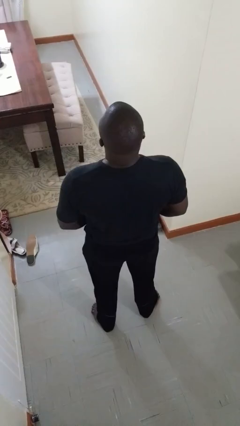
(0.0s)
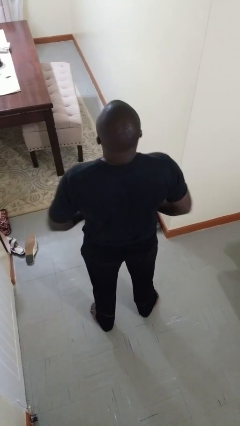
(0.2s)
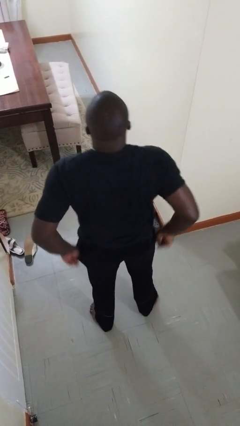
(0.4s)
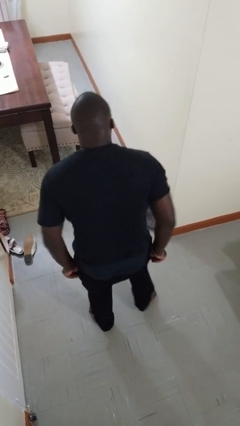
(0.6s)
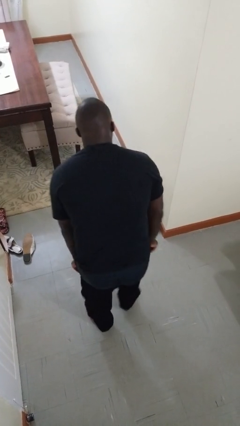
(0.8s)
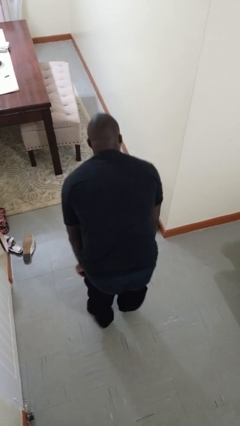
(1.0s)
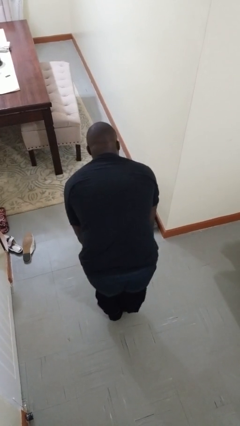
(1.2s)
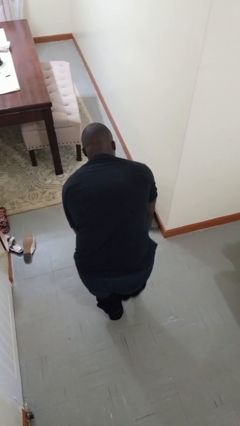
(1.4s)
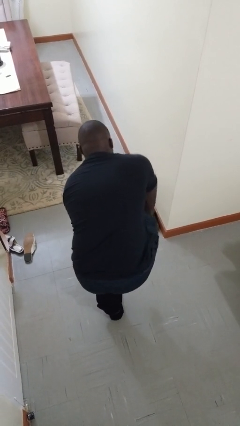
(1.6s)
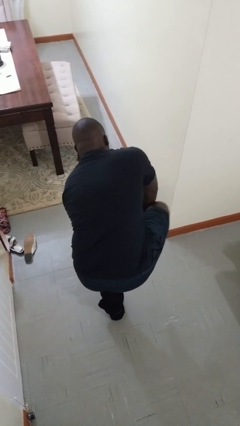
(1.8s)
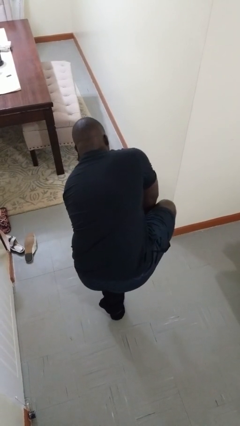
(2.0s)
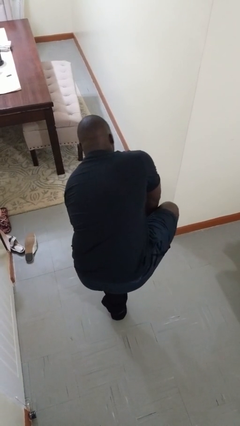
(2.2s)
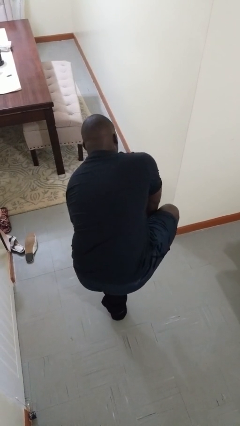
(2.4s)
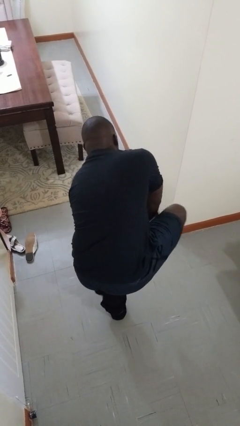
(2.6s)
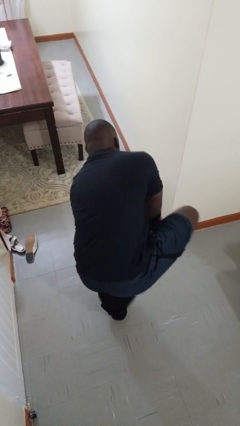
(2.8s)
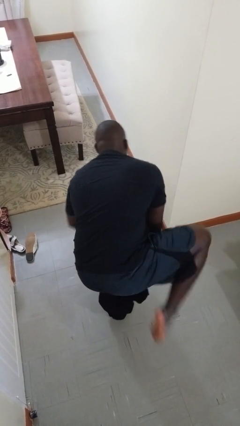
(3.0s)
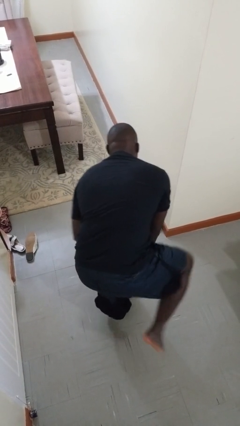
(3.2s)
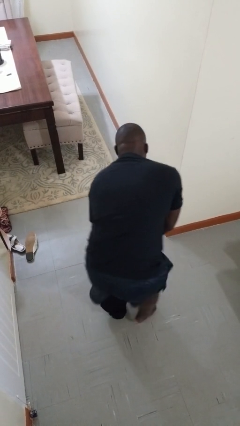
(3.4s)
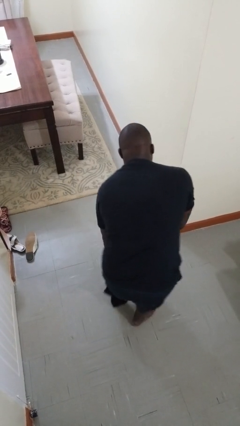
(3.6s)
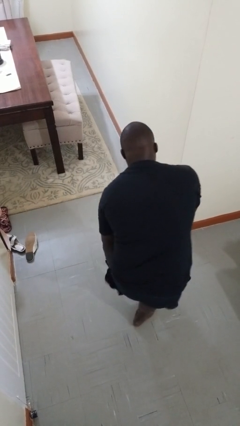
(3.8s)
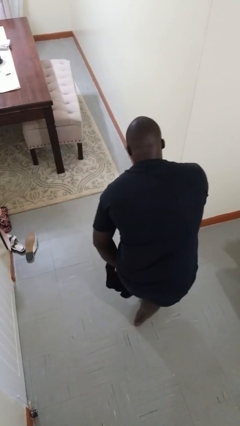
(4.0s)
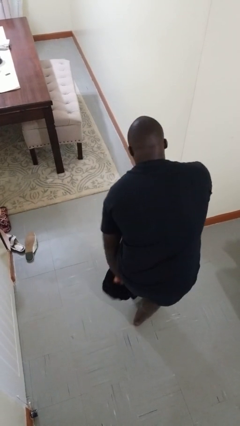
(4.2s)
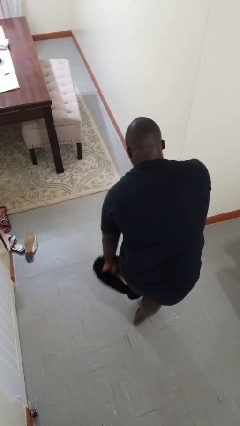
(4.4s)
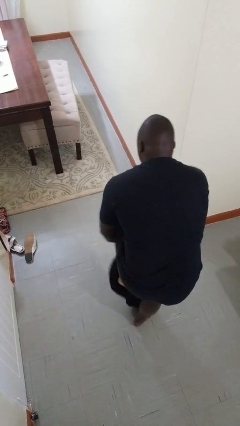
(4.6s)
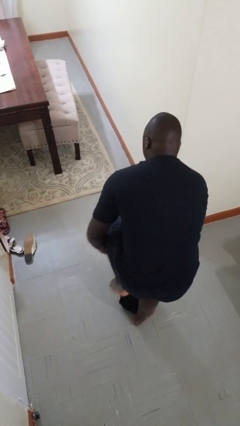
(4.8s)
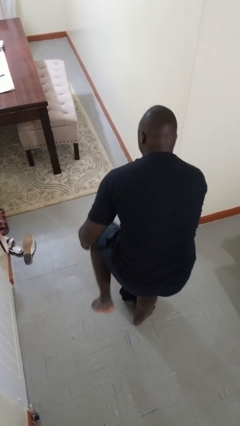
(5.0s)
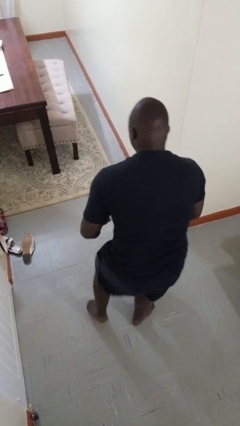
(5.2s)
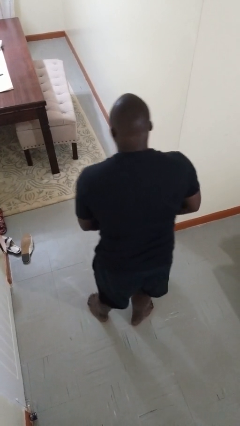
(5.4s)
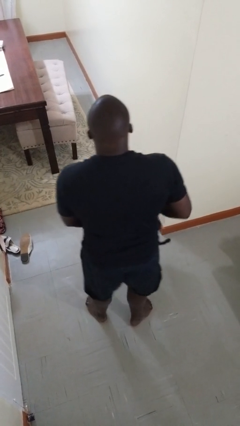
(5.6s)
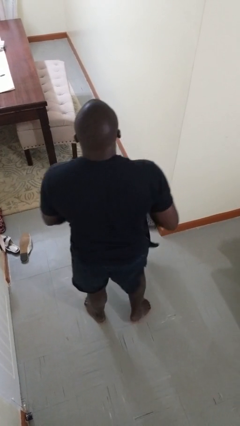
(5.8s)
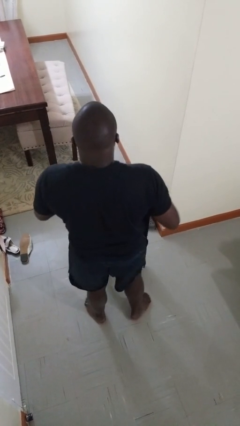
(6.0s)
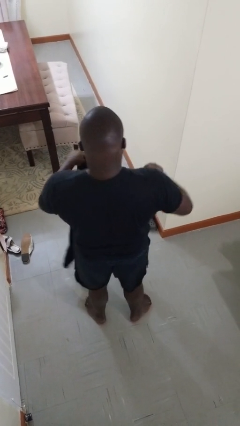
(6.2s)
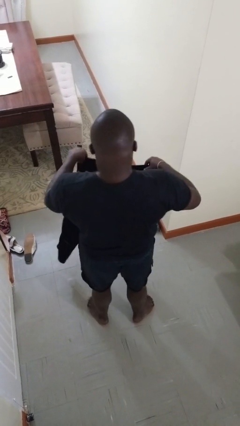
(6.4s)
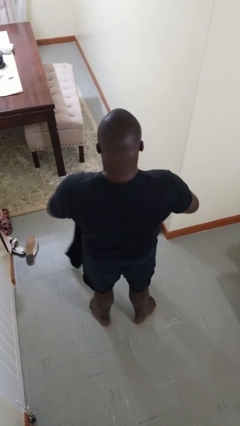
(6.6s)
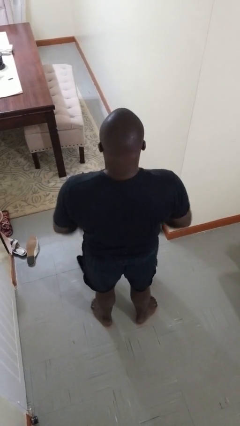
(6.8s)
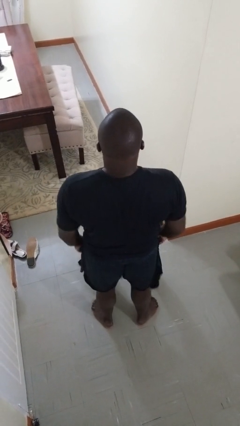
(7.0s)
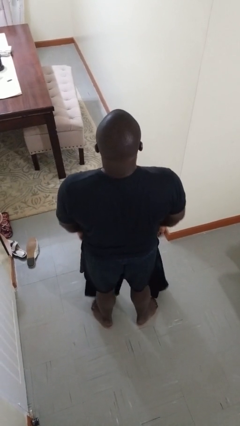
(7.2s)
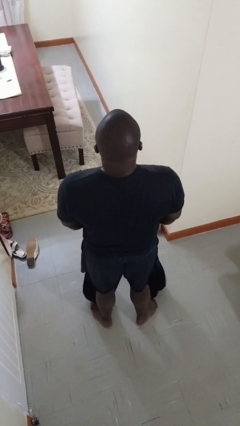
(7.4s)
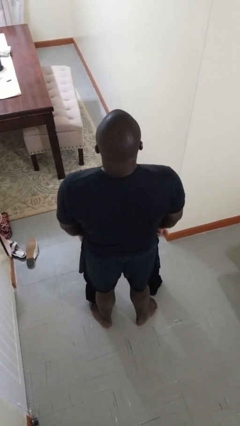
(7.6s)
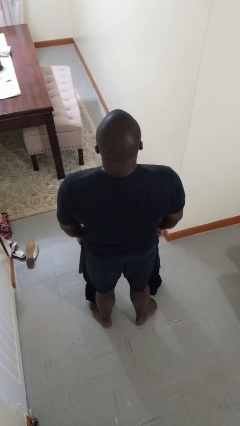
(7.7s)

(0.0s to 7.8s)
person puts on pants

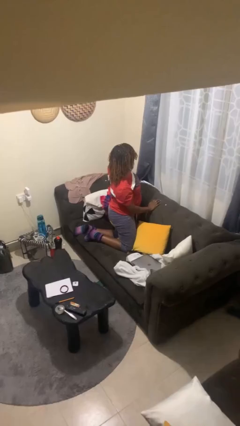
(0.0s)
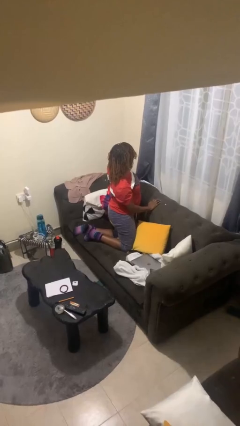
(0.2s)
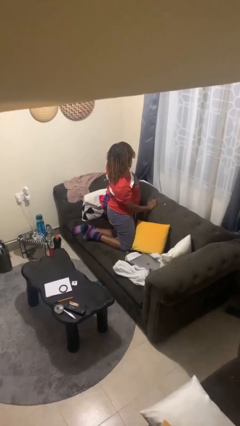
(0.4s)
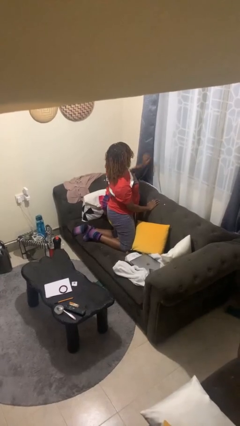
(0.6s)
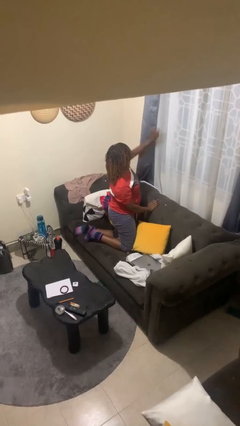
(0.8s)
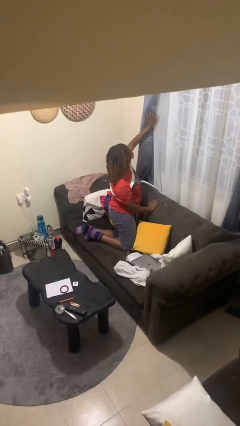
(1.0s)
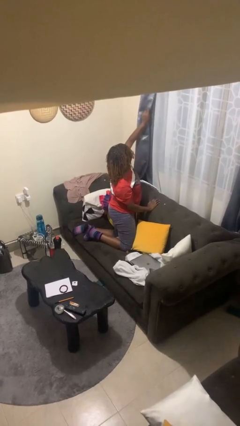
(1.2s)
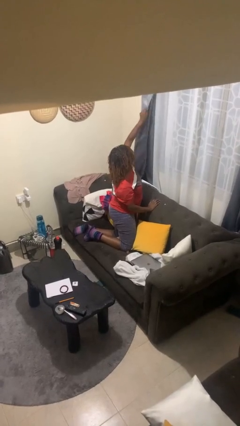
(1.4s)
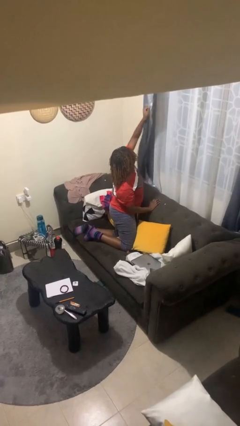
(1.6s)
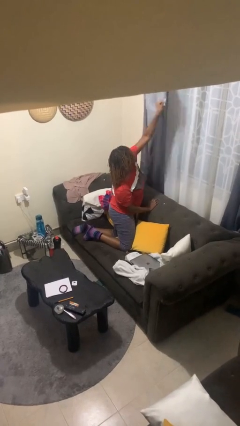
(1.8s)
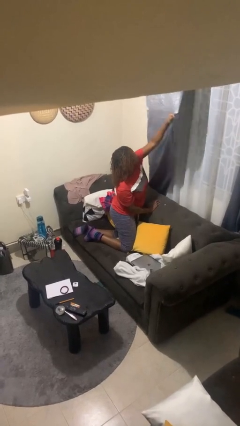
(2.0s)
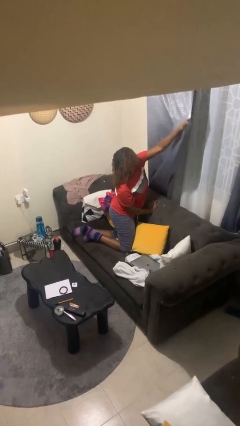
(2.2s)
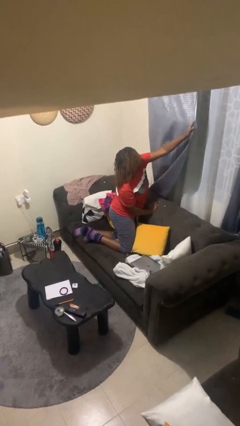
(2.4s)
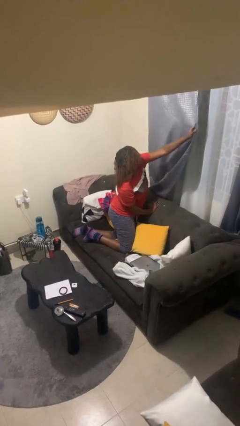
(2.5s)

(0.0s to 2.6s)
person closes curtains

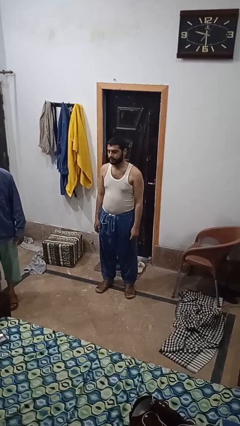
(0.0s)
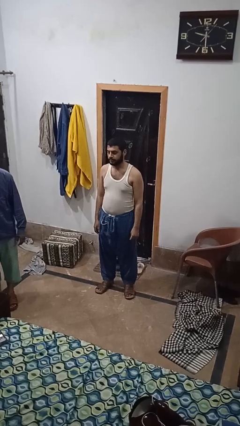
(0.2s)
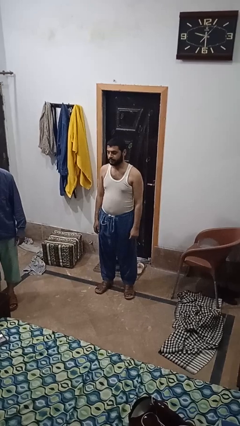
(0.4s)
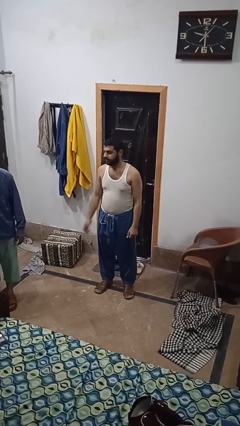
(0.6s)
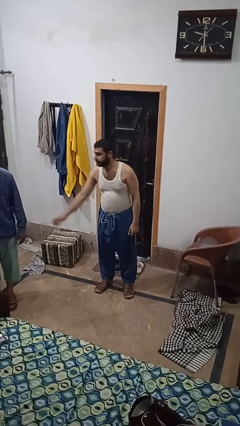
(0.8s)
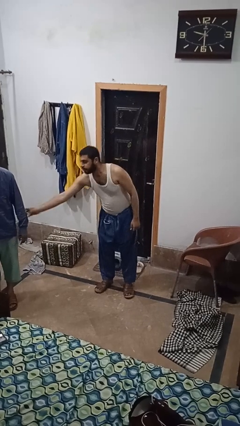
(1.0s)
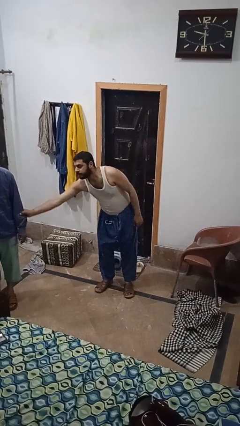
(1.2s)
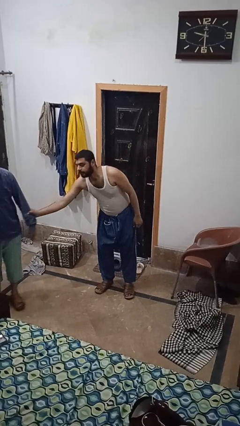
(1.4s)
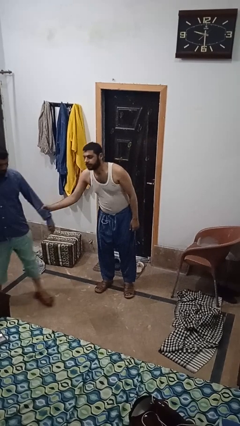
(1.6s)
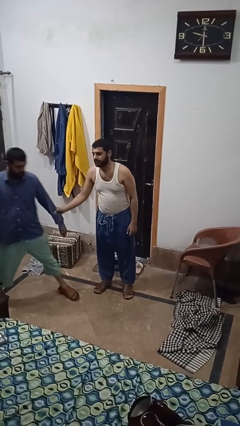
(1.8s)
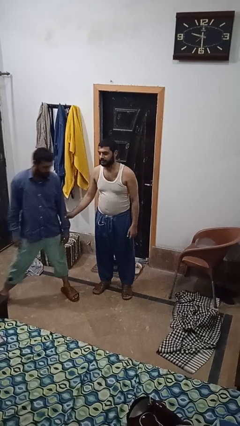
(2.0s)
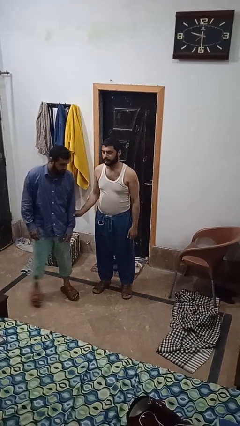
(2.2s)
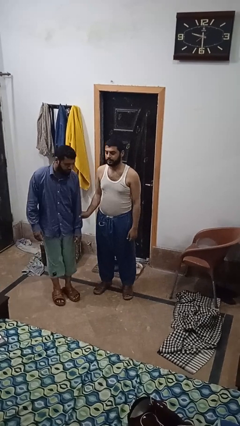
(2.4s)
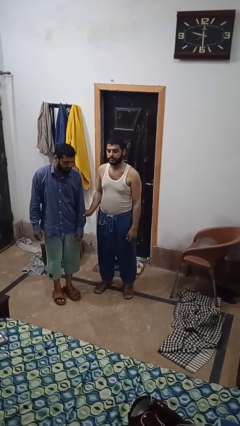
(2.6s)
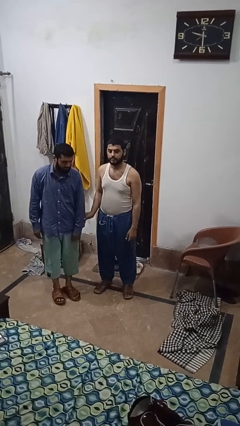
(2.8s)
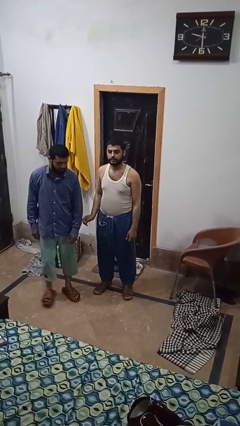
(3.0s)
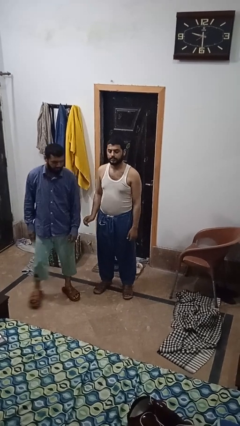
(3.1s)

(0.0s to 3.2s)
person grabs person by forearm

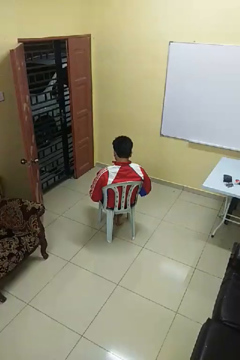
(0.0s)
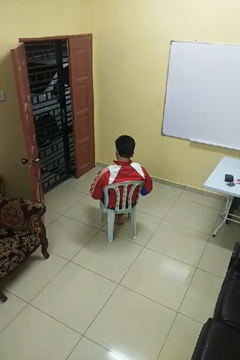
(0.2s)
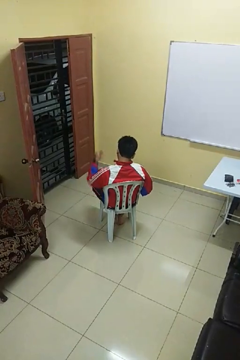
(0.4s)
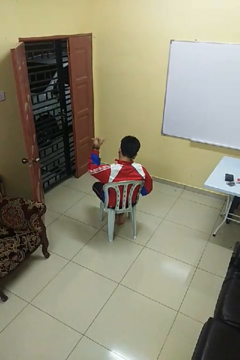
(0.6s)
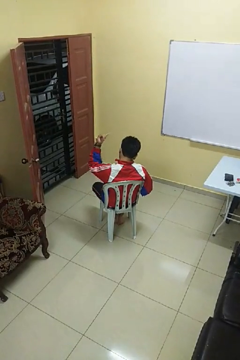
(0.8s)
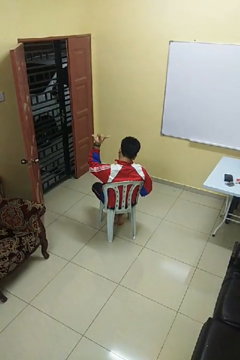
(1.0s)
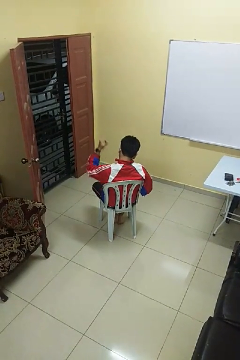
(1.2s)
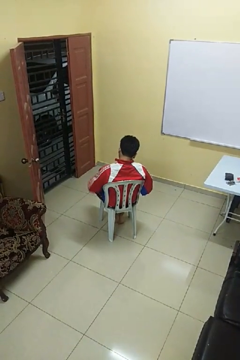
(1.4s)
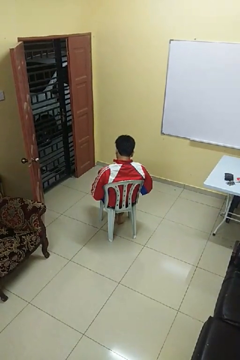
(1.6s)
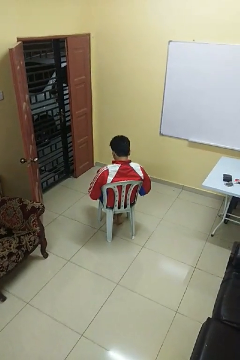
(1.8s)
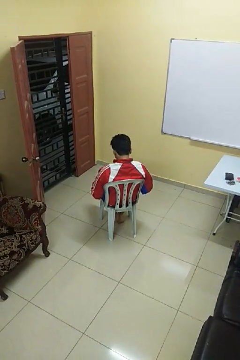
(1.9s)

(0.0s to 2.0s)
person gestures hang loose

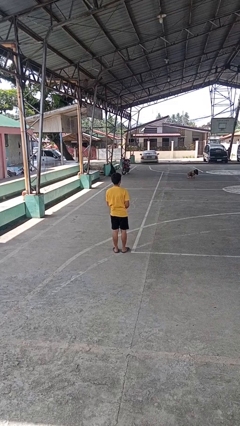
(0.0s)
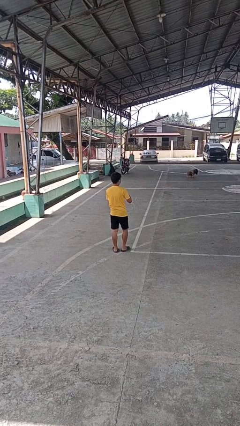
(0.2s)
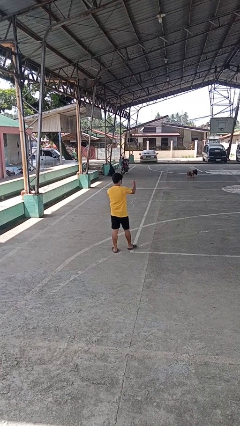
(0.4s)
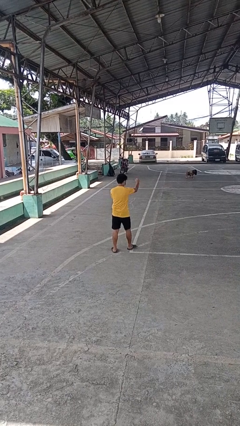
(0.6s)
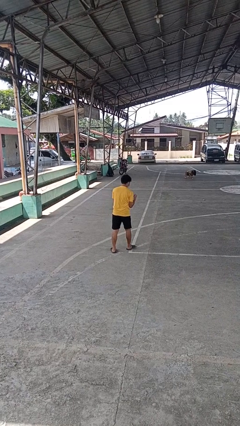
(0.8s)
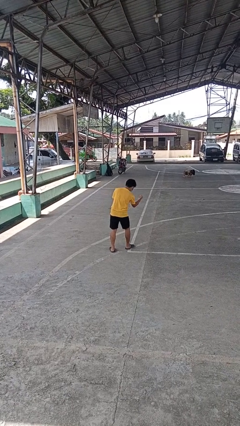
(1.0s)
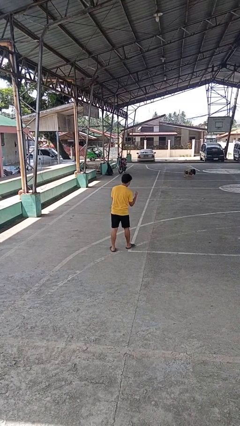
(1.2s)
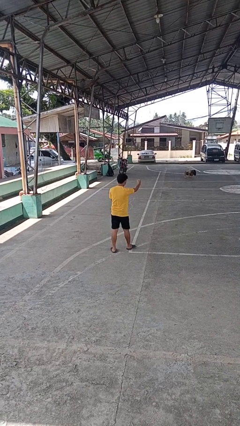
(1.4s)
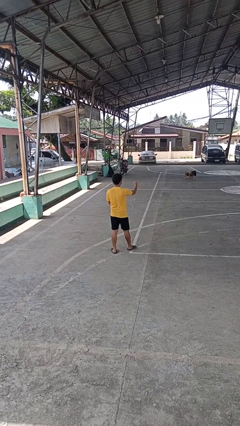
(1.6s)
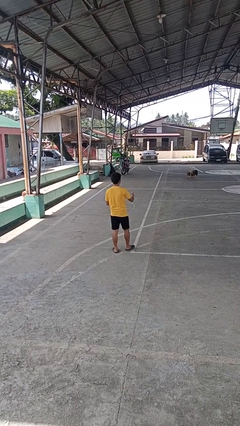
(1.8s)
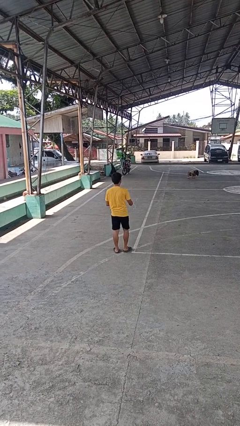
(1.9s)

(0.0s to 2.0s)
person punches
